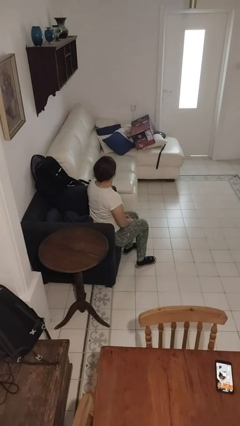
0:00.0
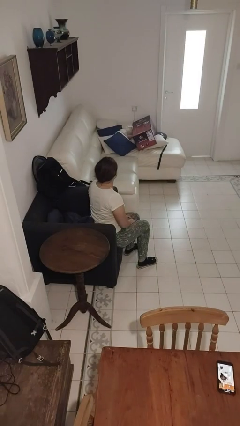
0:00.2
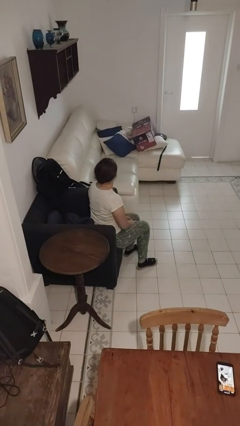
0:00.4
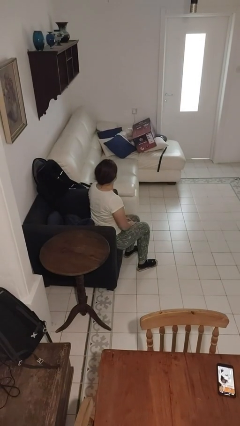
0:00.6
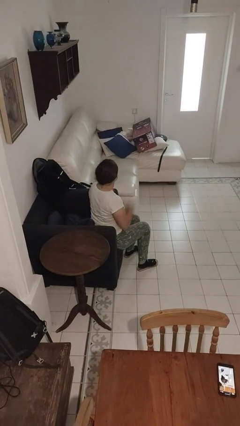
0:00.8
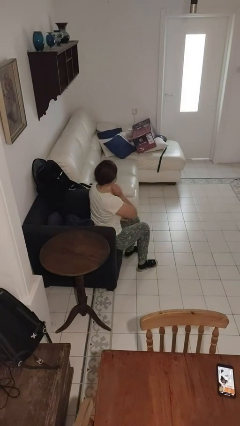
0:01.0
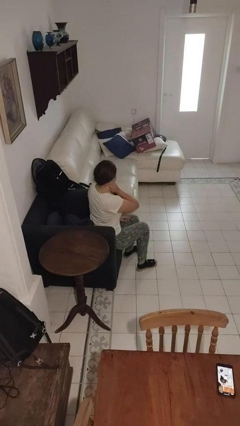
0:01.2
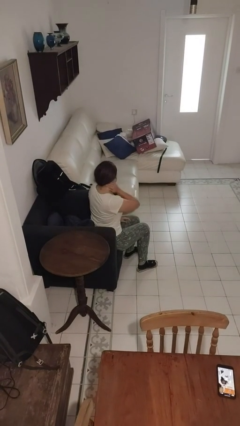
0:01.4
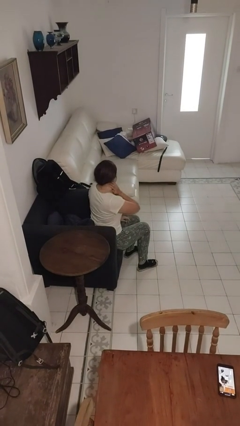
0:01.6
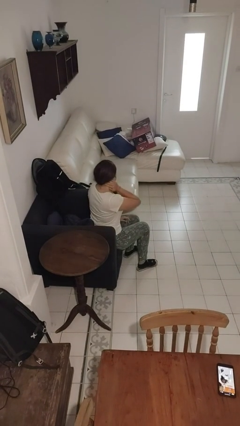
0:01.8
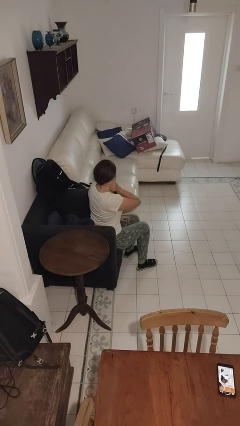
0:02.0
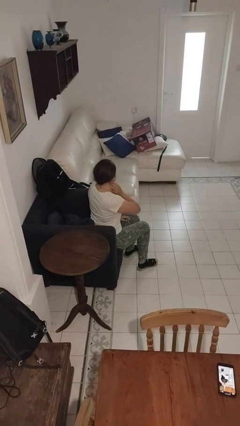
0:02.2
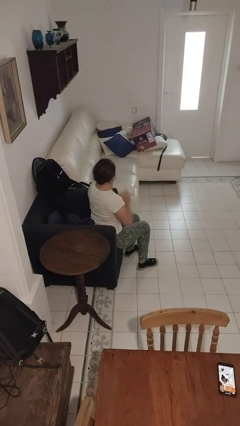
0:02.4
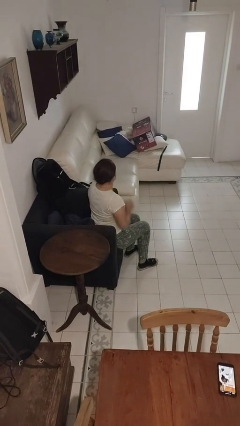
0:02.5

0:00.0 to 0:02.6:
person rubs neck

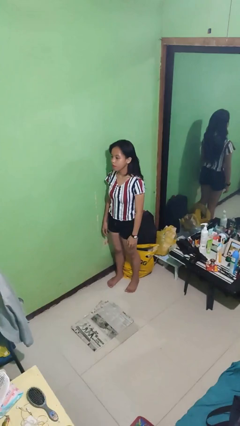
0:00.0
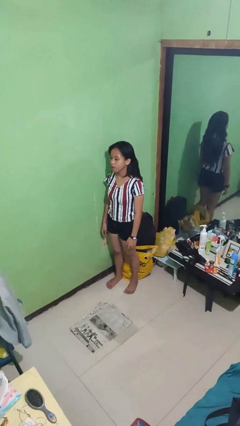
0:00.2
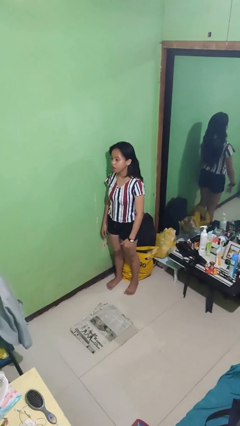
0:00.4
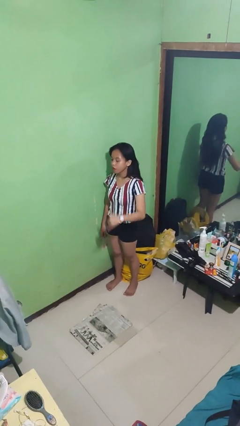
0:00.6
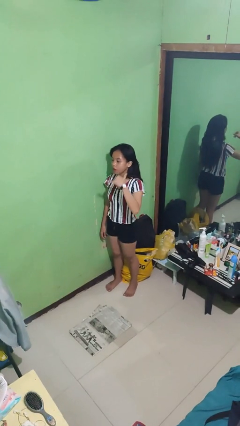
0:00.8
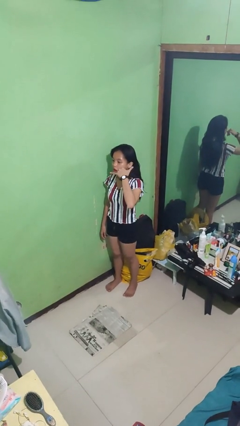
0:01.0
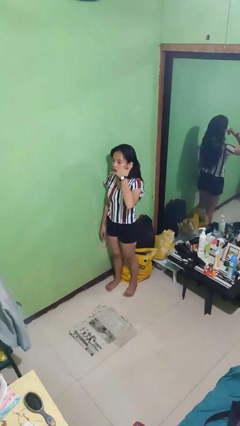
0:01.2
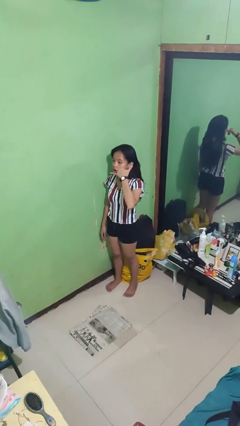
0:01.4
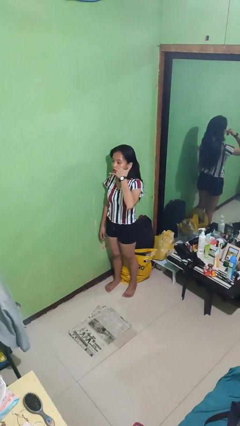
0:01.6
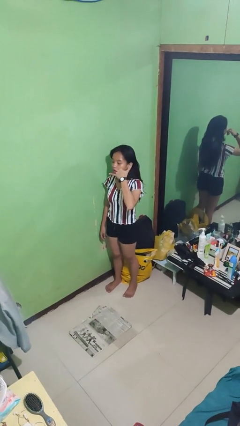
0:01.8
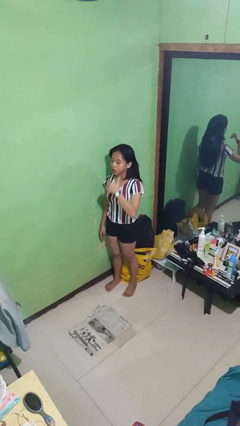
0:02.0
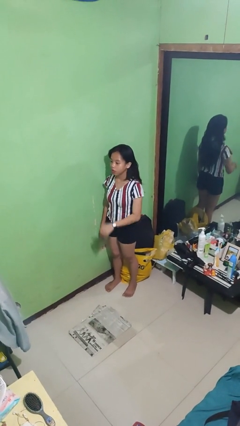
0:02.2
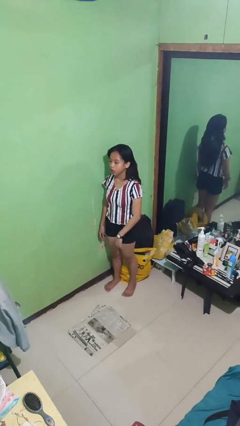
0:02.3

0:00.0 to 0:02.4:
person gestures call me

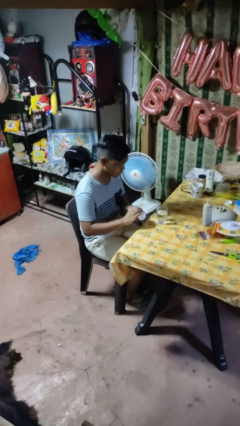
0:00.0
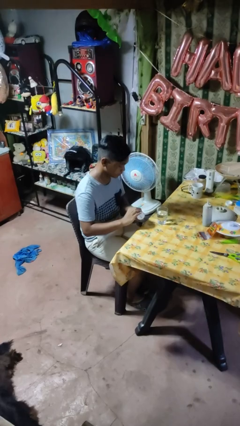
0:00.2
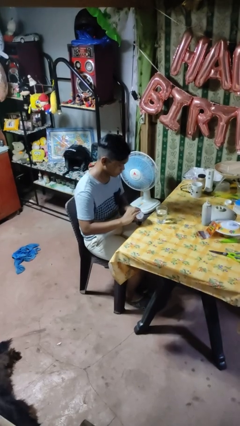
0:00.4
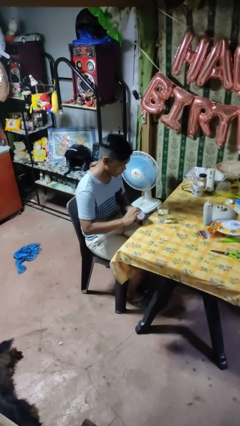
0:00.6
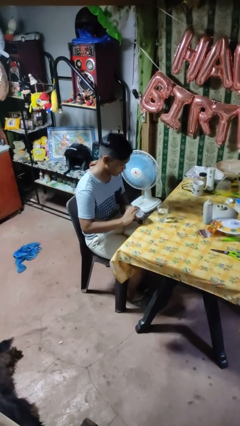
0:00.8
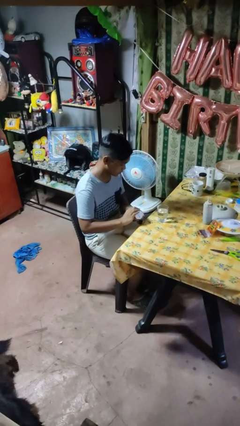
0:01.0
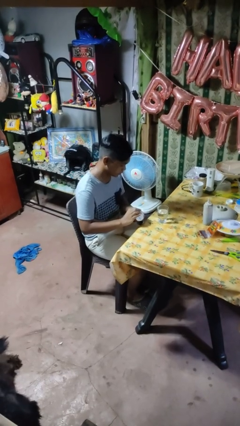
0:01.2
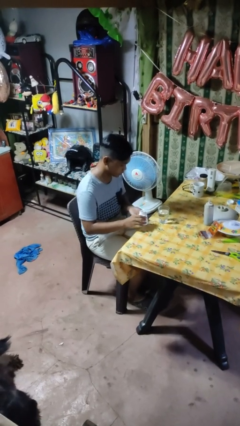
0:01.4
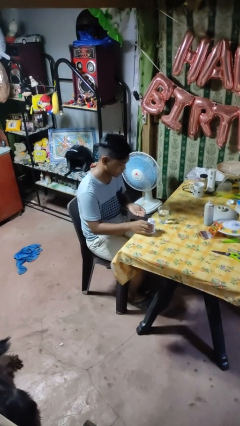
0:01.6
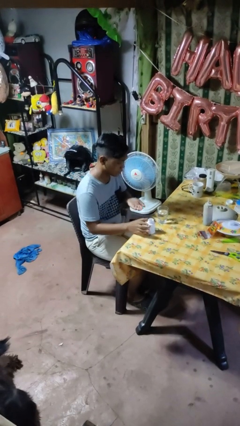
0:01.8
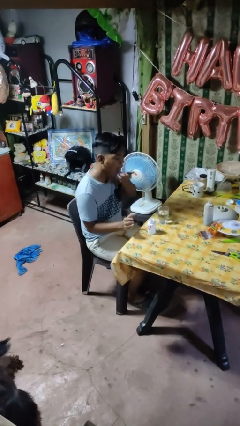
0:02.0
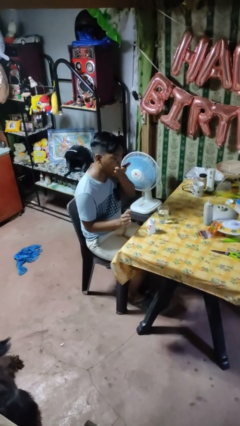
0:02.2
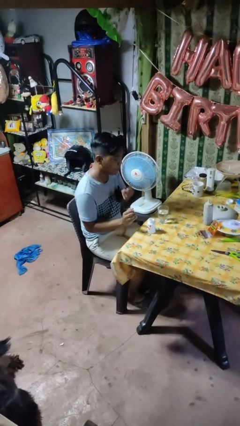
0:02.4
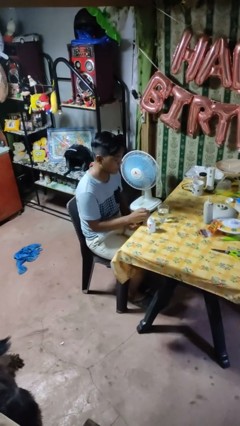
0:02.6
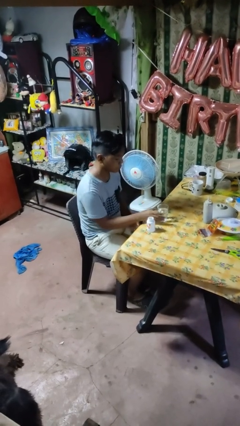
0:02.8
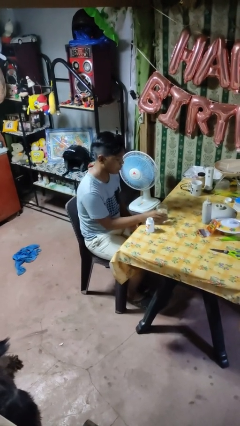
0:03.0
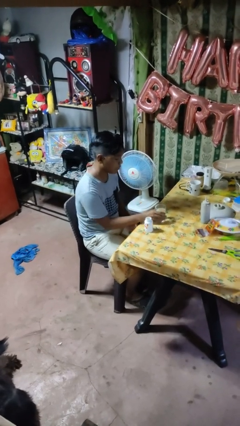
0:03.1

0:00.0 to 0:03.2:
person takes medicine pills

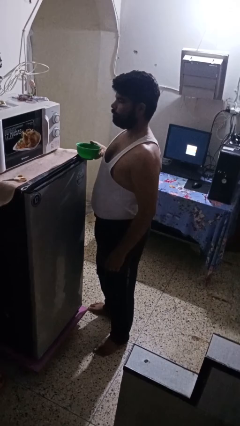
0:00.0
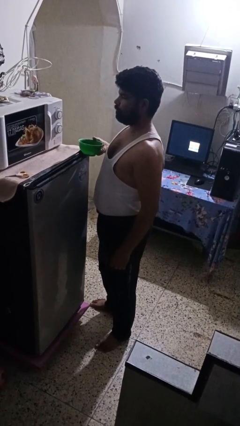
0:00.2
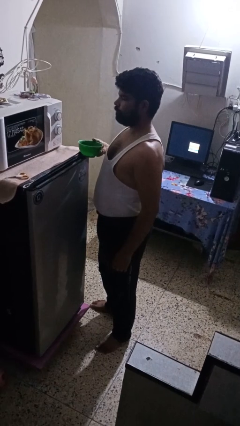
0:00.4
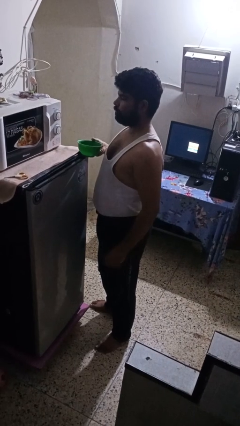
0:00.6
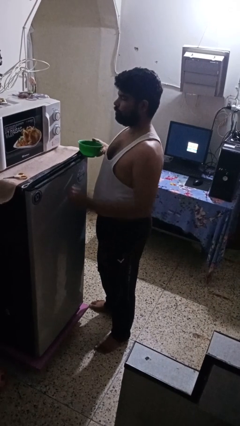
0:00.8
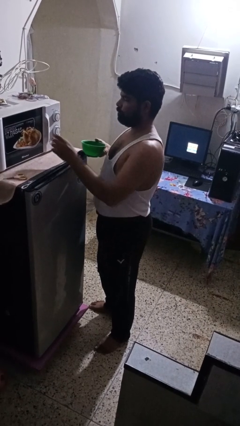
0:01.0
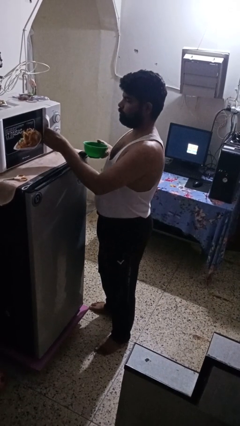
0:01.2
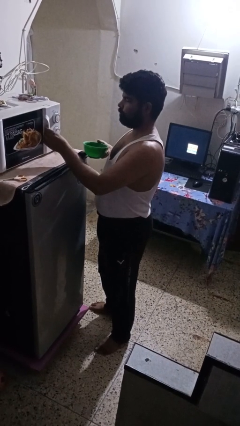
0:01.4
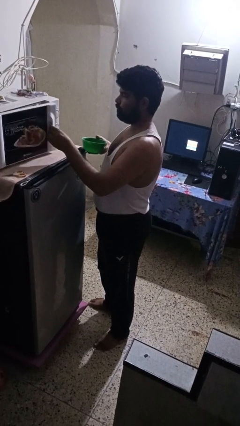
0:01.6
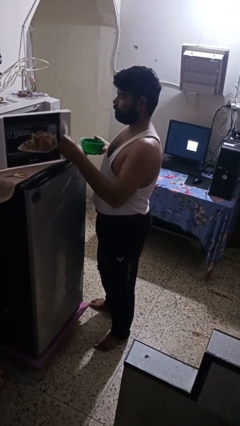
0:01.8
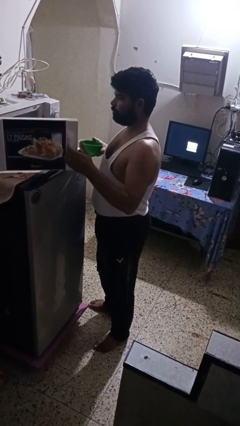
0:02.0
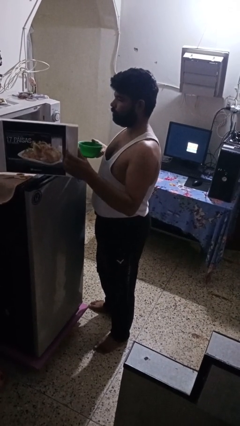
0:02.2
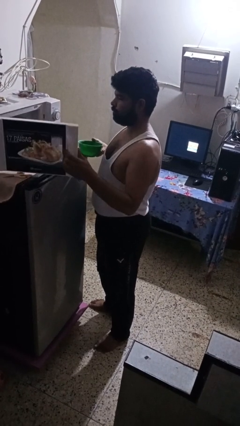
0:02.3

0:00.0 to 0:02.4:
person opens microwave

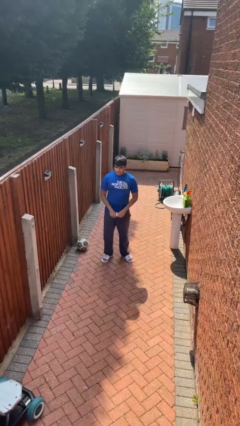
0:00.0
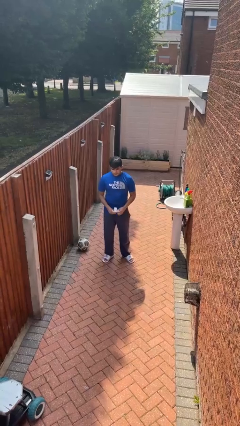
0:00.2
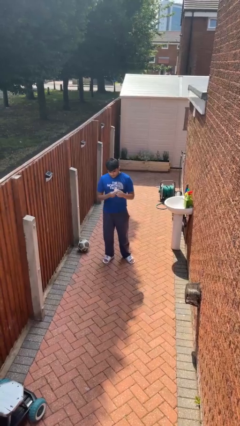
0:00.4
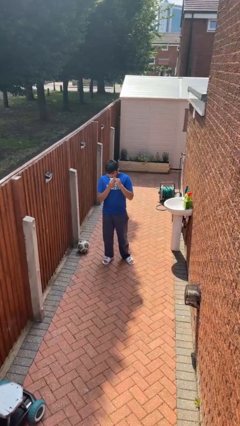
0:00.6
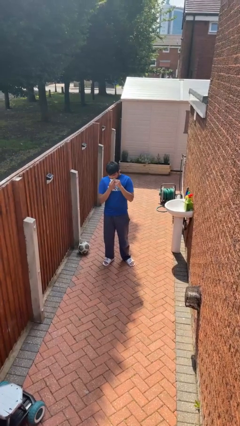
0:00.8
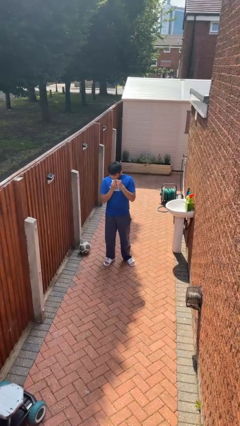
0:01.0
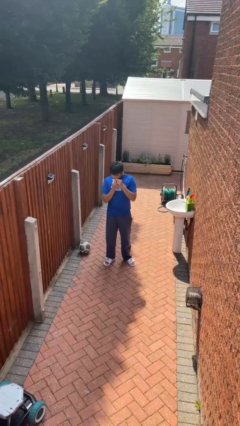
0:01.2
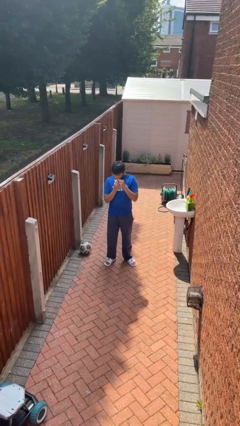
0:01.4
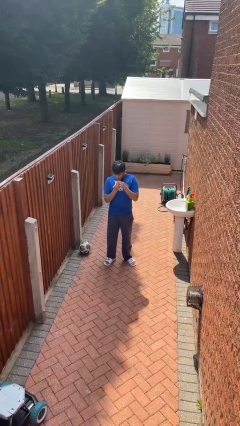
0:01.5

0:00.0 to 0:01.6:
person wipes mouth with napkin

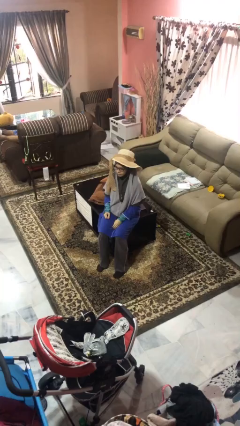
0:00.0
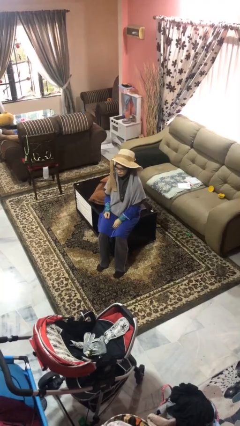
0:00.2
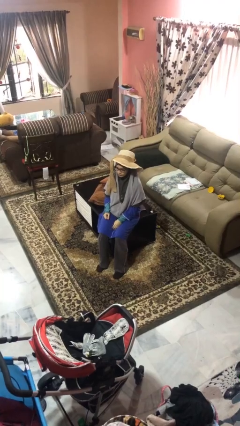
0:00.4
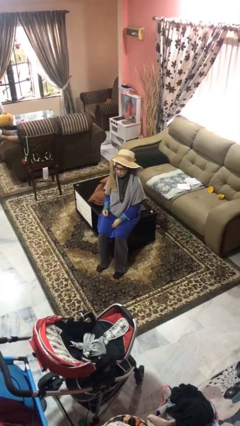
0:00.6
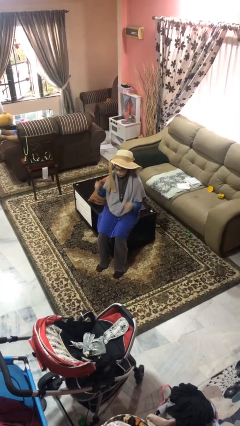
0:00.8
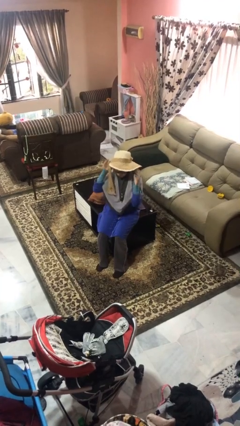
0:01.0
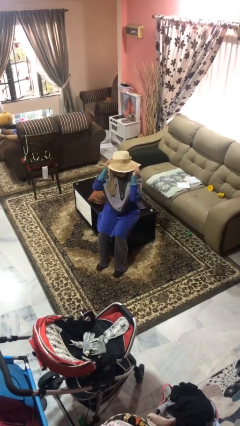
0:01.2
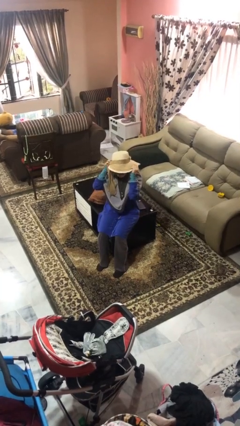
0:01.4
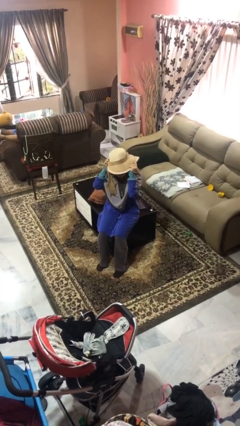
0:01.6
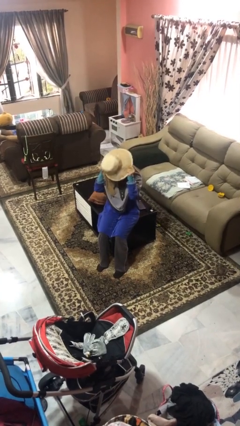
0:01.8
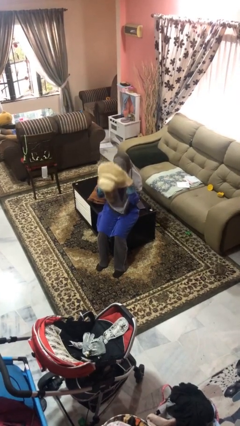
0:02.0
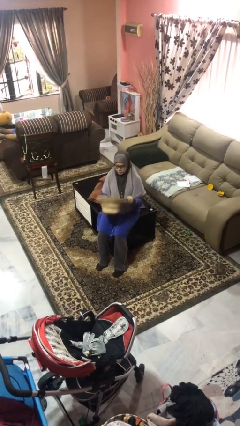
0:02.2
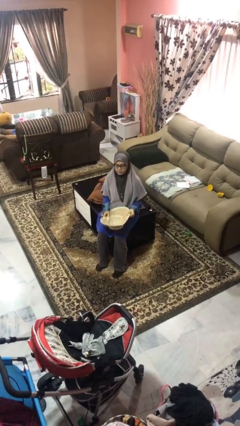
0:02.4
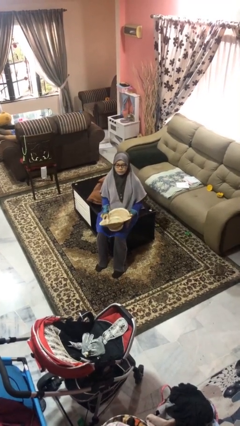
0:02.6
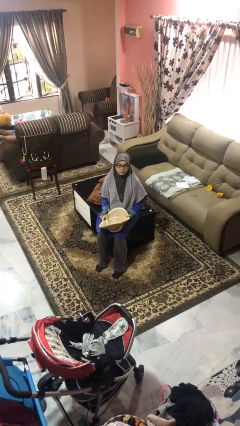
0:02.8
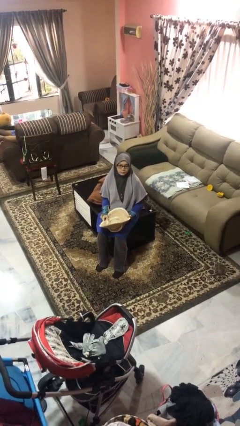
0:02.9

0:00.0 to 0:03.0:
person takes off hat

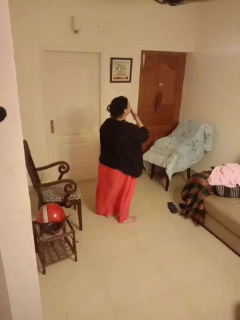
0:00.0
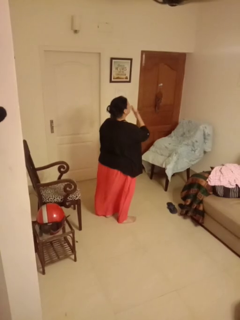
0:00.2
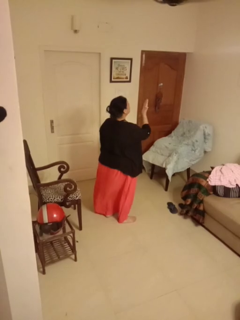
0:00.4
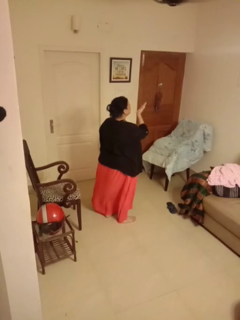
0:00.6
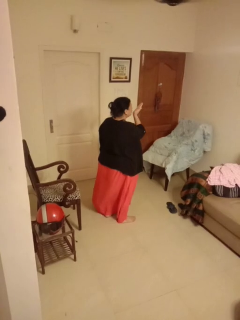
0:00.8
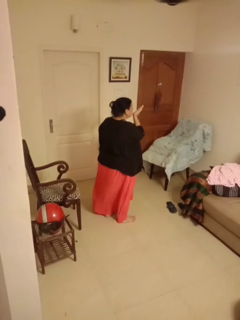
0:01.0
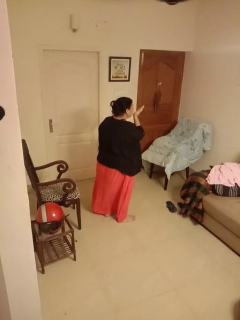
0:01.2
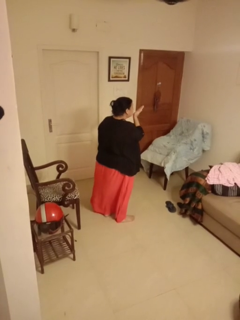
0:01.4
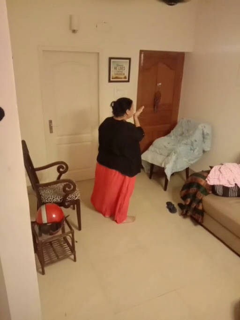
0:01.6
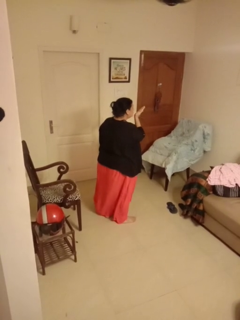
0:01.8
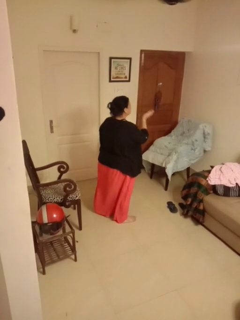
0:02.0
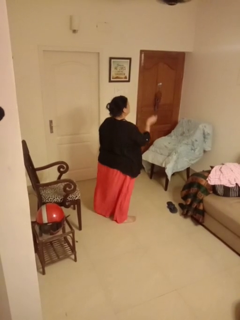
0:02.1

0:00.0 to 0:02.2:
person gestures blow kiss

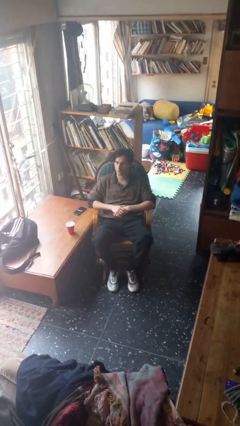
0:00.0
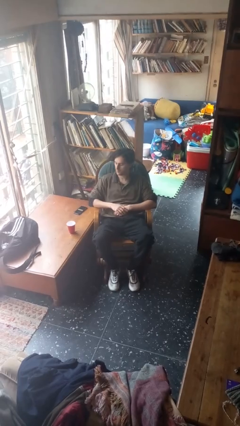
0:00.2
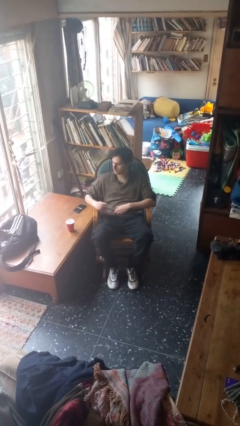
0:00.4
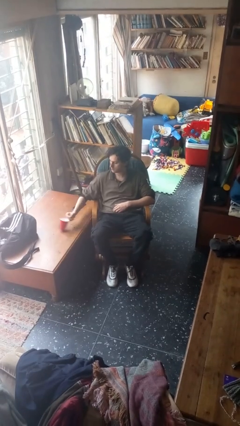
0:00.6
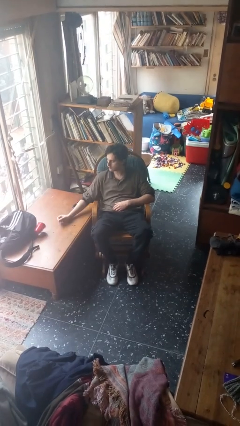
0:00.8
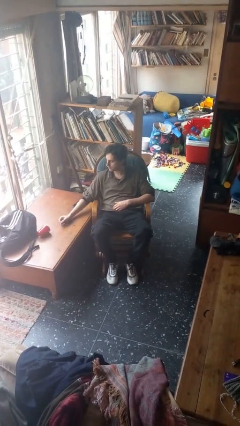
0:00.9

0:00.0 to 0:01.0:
person knocks over glass
